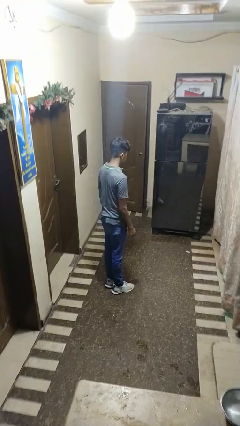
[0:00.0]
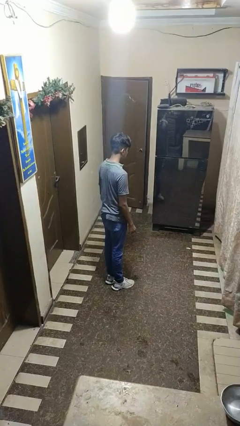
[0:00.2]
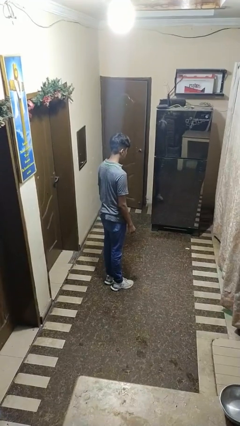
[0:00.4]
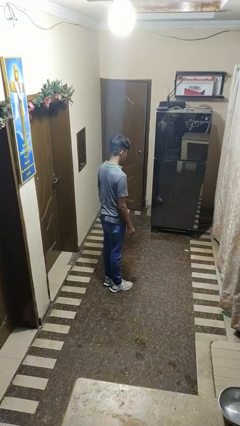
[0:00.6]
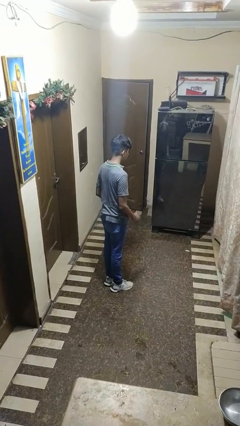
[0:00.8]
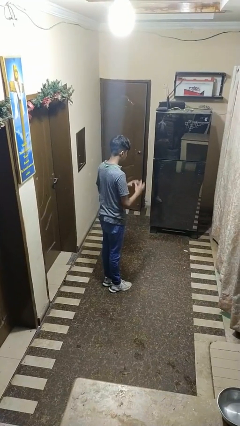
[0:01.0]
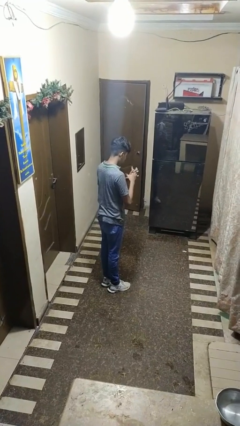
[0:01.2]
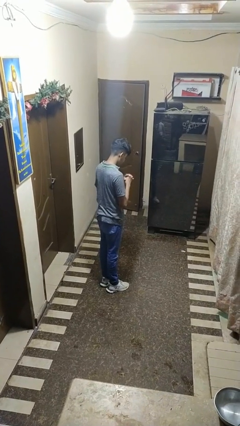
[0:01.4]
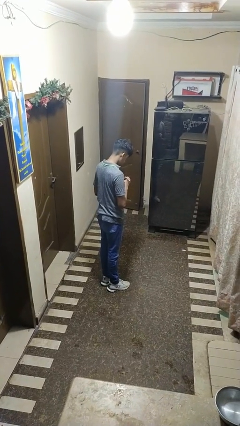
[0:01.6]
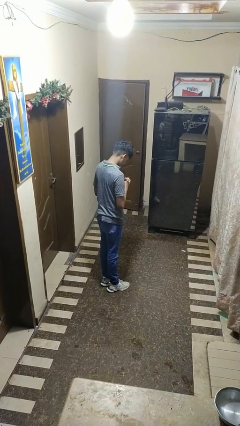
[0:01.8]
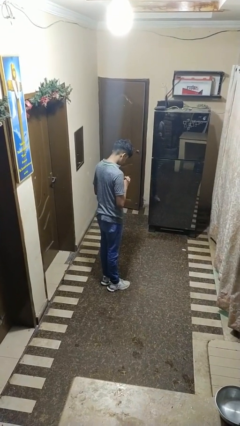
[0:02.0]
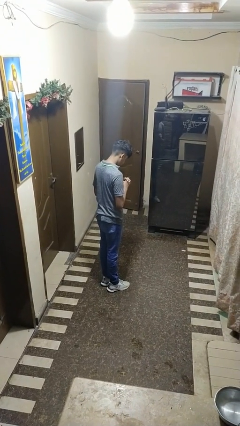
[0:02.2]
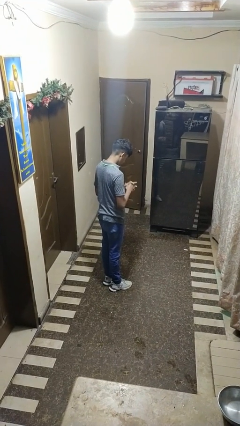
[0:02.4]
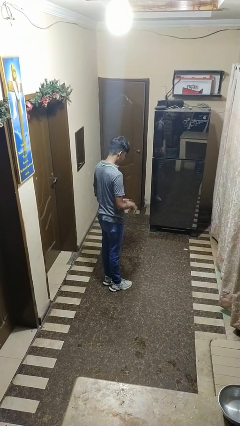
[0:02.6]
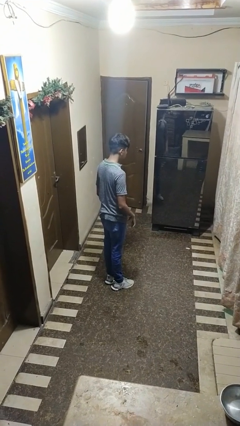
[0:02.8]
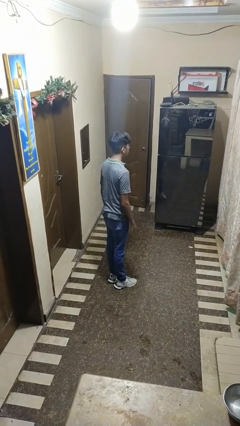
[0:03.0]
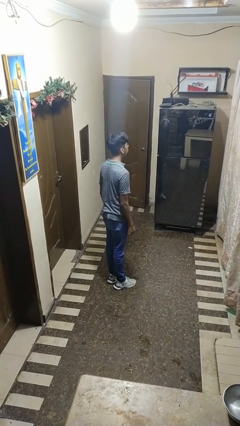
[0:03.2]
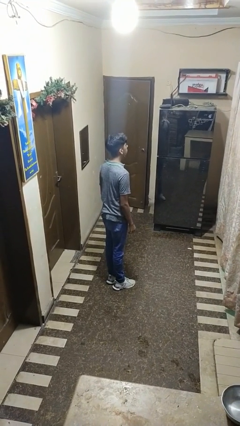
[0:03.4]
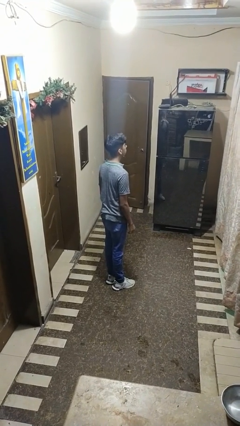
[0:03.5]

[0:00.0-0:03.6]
person prays

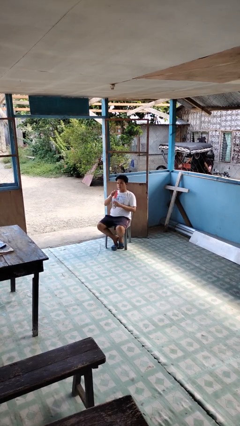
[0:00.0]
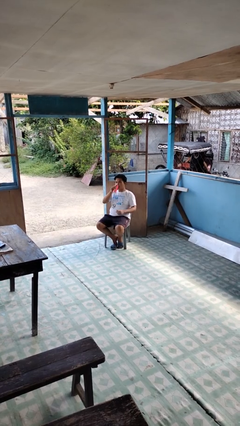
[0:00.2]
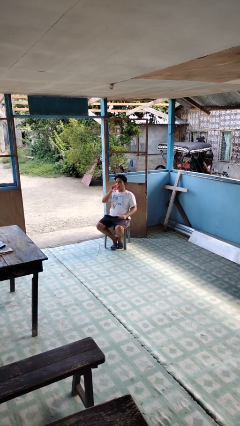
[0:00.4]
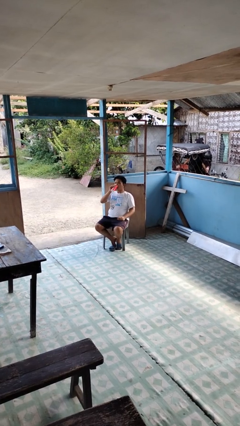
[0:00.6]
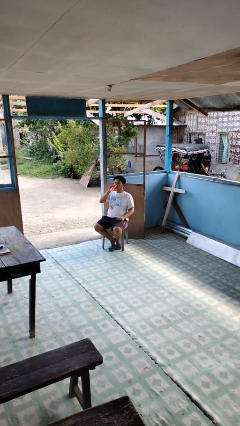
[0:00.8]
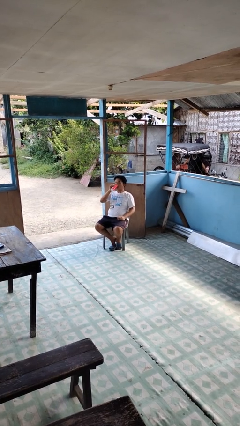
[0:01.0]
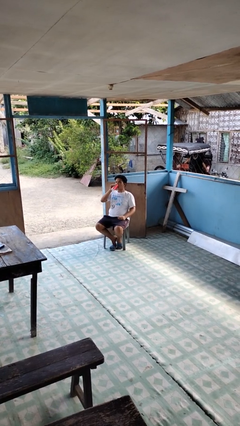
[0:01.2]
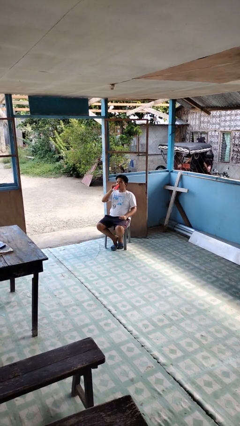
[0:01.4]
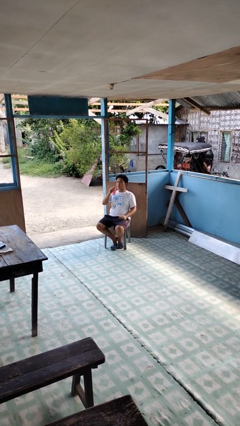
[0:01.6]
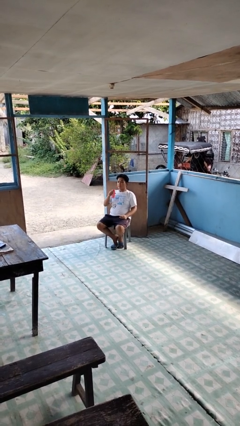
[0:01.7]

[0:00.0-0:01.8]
person drinks from beverage can

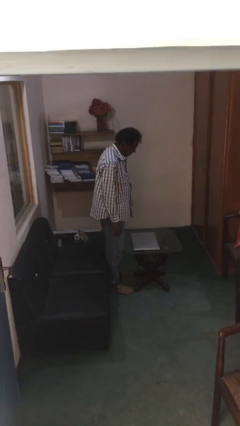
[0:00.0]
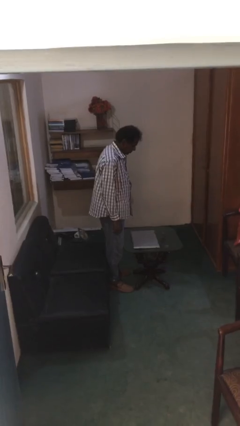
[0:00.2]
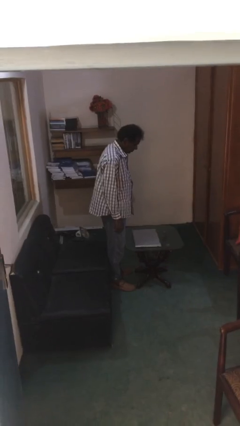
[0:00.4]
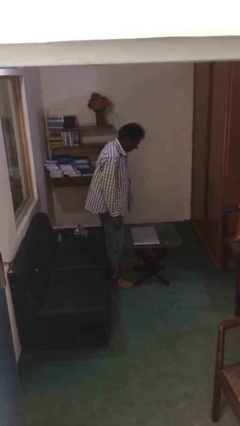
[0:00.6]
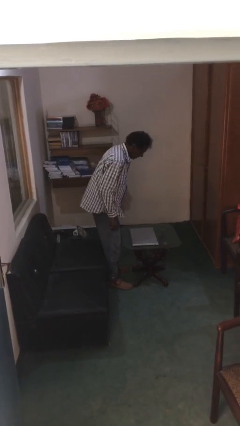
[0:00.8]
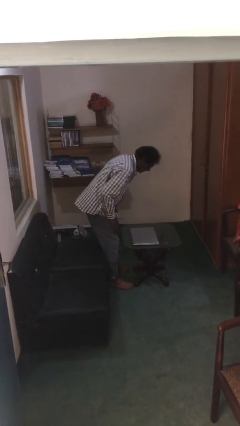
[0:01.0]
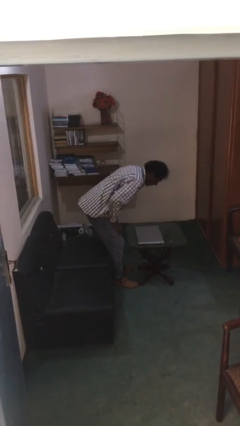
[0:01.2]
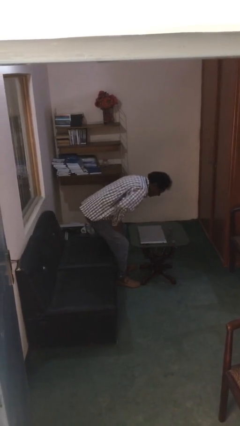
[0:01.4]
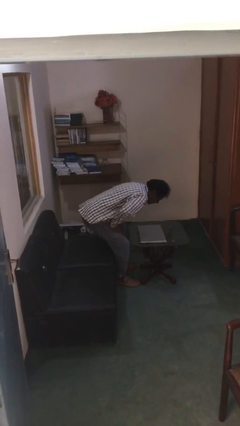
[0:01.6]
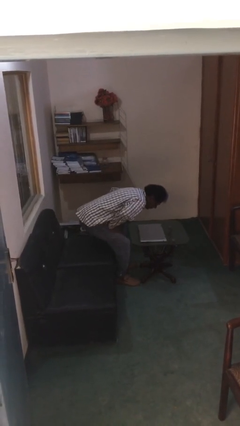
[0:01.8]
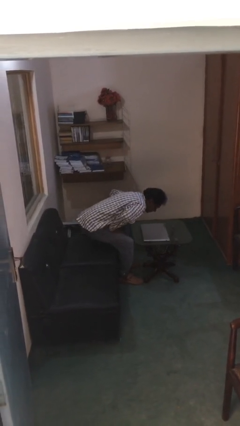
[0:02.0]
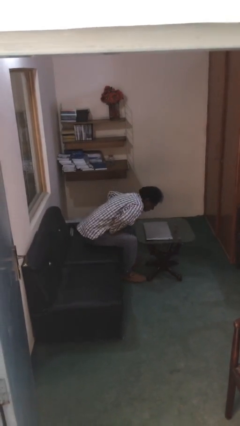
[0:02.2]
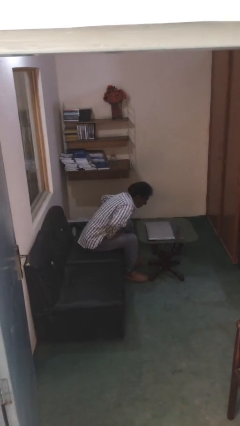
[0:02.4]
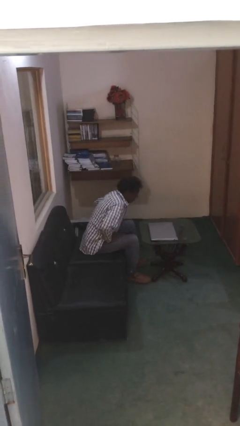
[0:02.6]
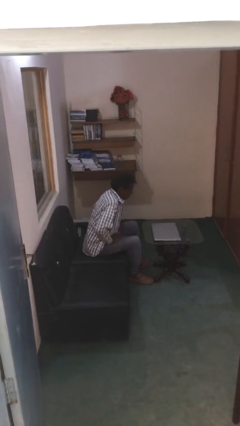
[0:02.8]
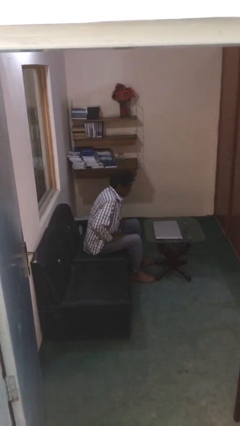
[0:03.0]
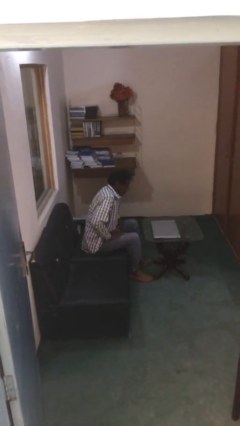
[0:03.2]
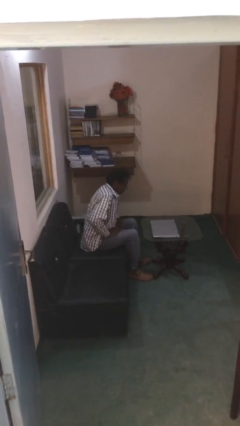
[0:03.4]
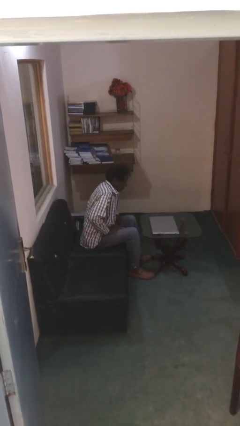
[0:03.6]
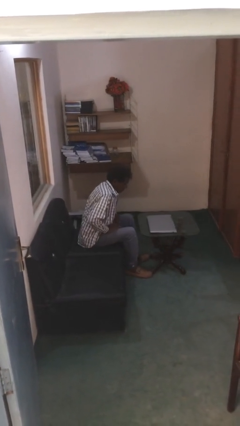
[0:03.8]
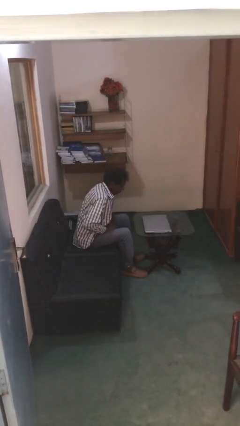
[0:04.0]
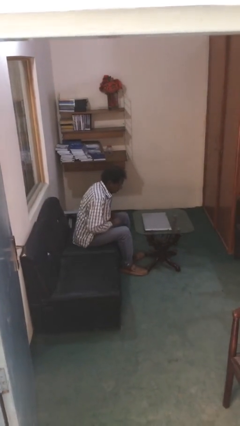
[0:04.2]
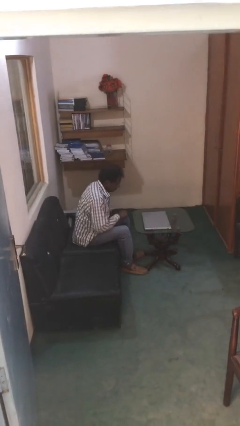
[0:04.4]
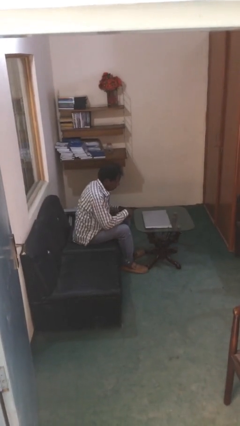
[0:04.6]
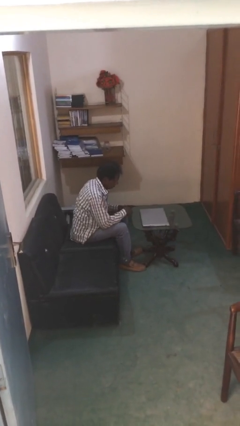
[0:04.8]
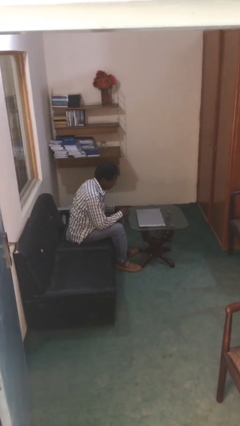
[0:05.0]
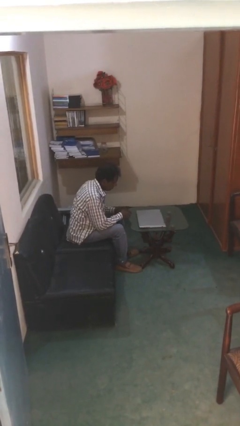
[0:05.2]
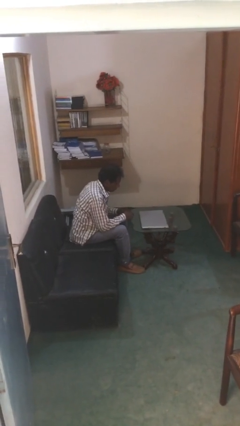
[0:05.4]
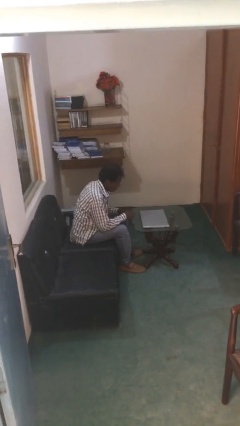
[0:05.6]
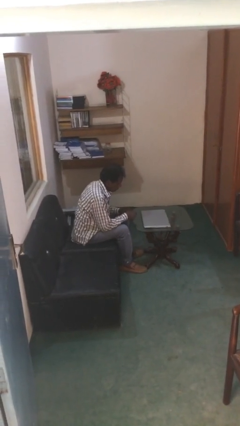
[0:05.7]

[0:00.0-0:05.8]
person sits down

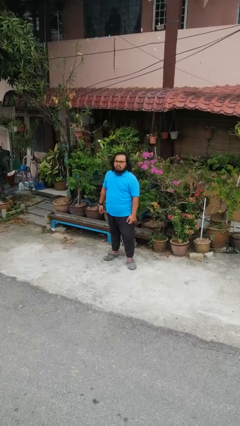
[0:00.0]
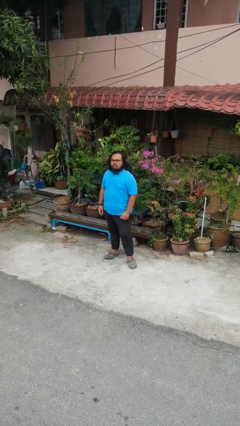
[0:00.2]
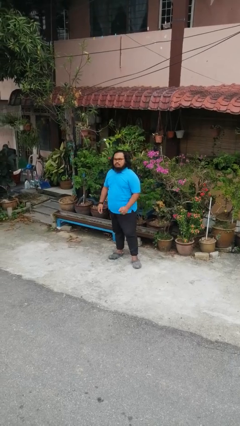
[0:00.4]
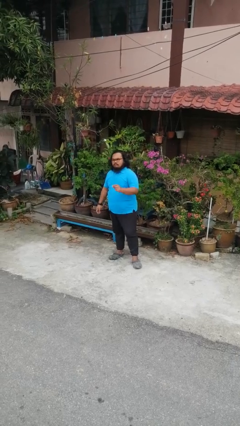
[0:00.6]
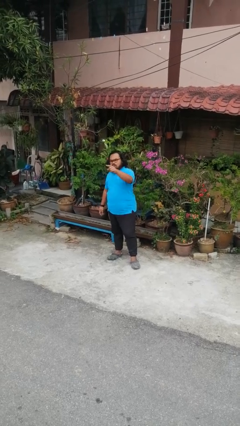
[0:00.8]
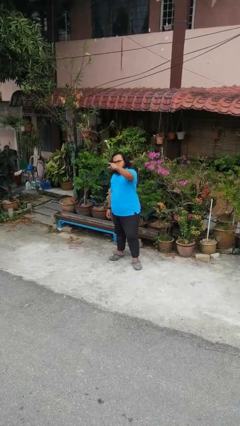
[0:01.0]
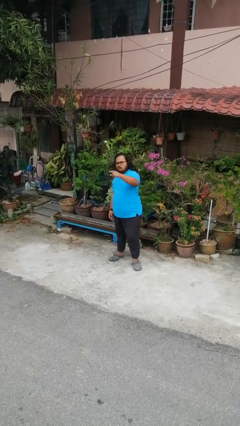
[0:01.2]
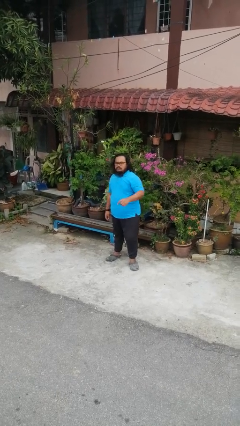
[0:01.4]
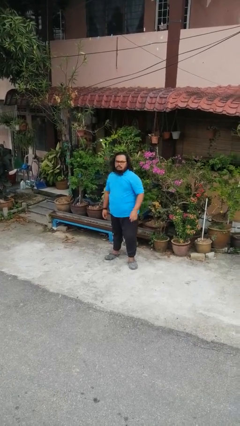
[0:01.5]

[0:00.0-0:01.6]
person points at person

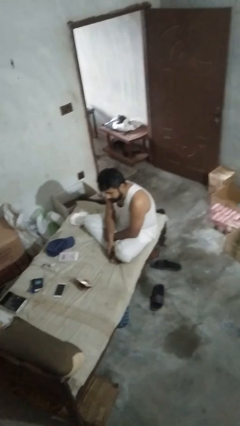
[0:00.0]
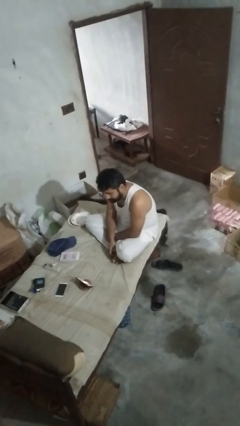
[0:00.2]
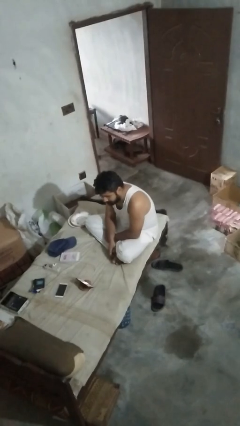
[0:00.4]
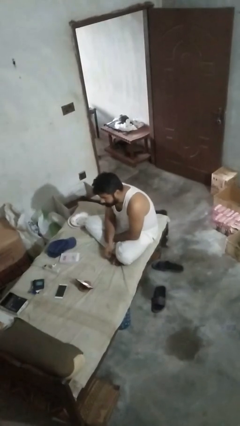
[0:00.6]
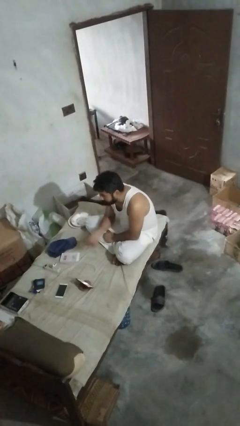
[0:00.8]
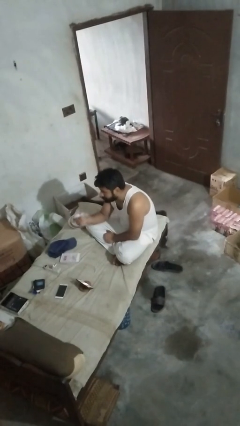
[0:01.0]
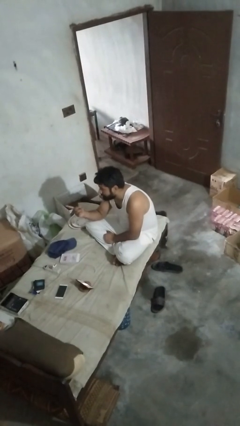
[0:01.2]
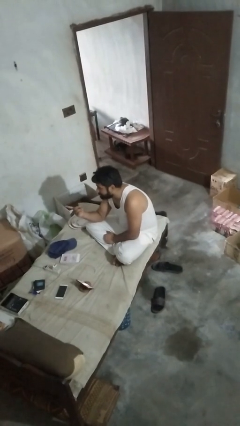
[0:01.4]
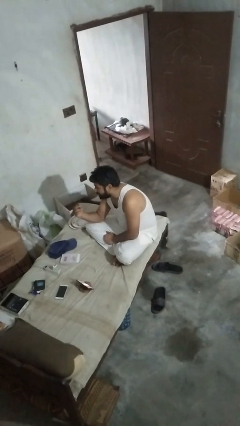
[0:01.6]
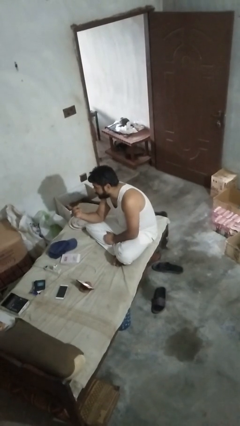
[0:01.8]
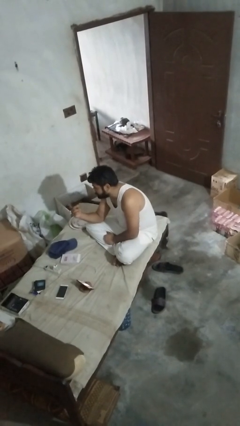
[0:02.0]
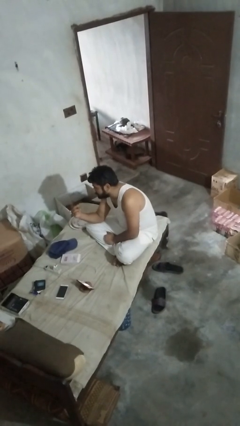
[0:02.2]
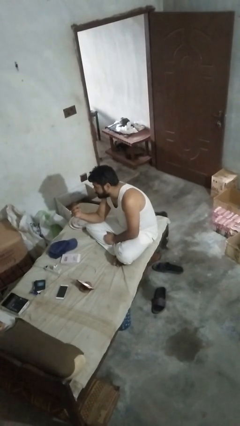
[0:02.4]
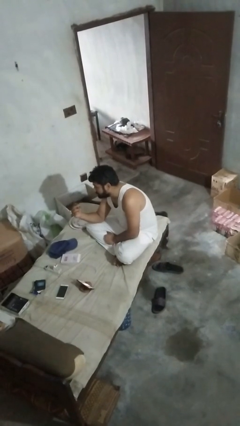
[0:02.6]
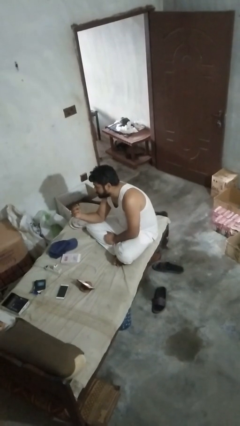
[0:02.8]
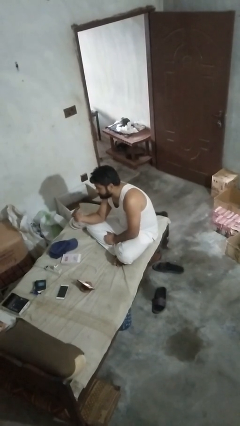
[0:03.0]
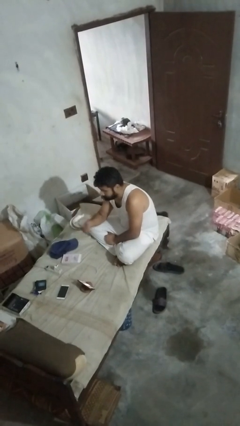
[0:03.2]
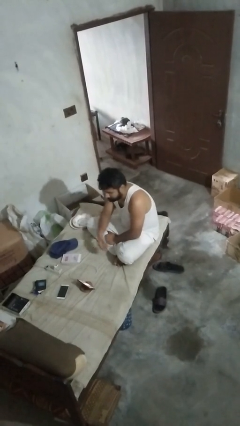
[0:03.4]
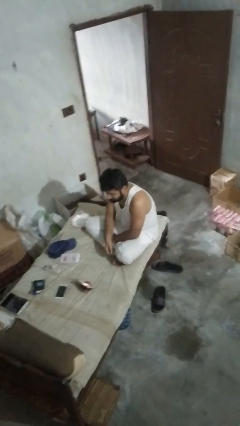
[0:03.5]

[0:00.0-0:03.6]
person gestures come here

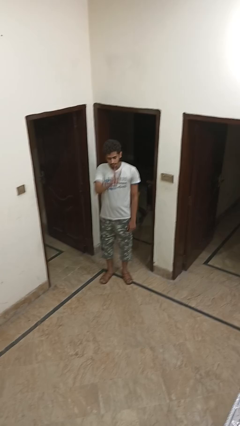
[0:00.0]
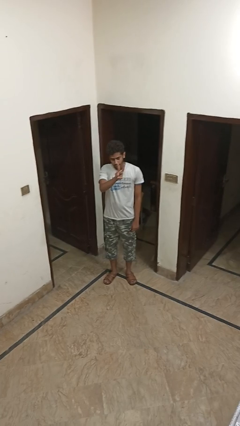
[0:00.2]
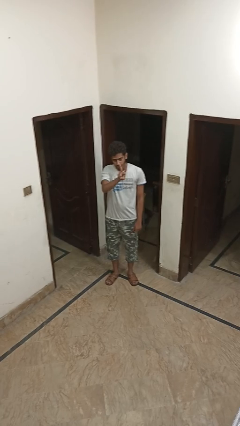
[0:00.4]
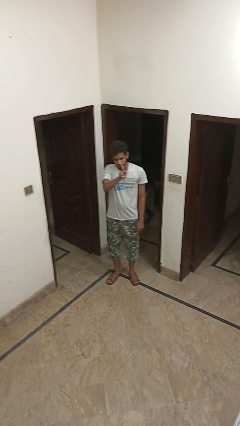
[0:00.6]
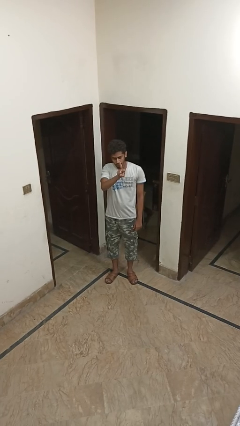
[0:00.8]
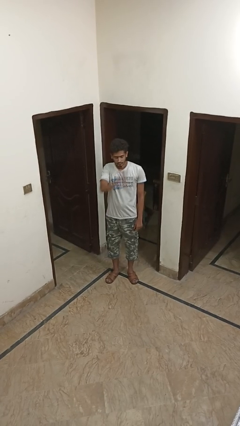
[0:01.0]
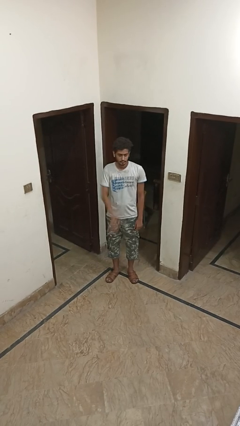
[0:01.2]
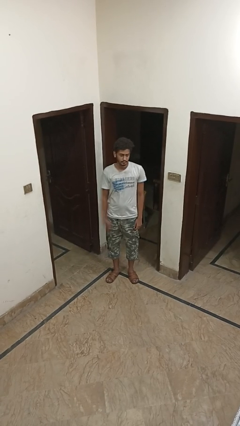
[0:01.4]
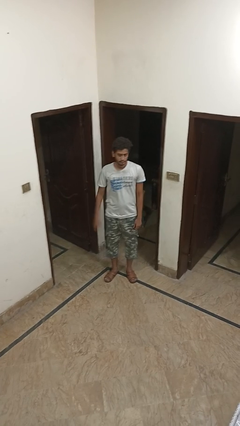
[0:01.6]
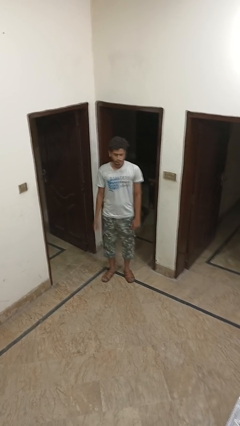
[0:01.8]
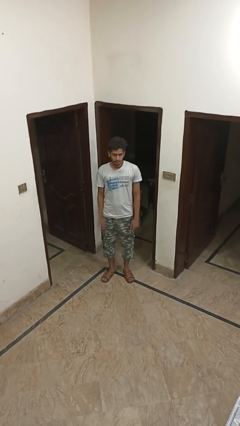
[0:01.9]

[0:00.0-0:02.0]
person gestures peace
